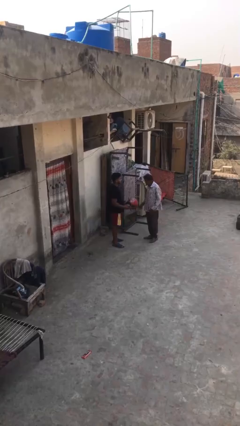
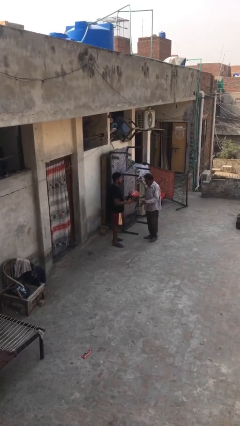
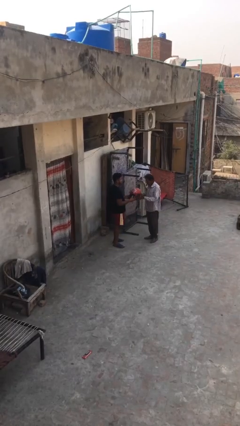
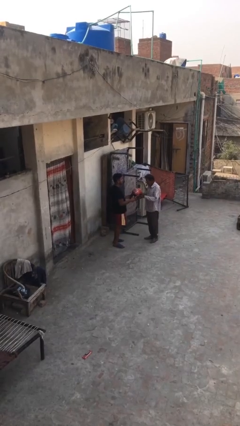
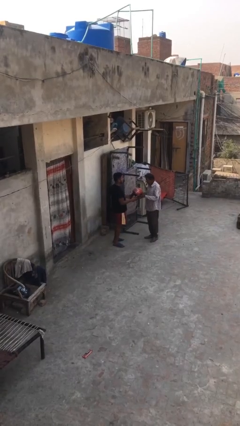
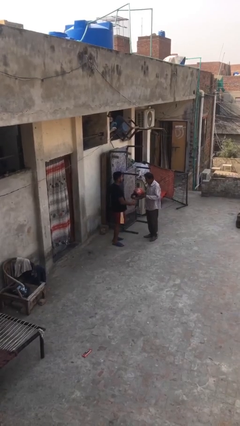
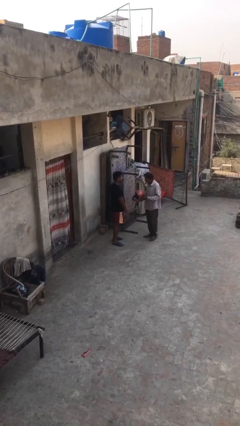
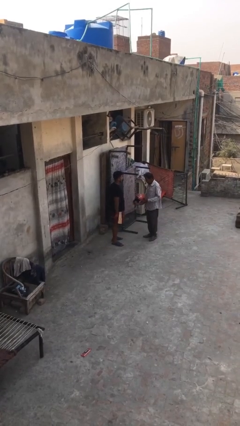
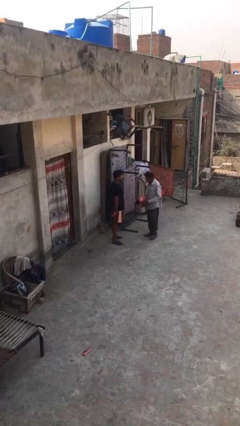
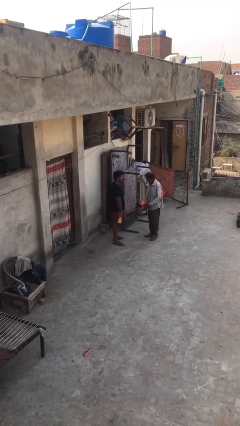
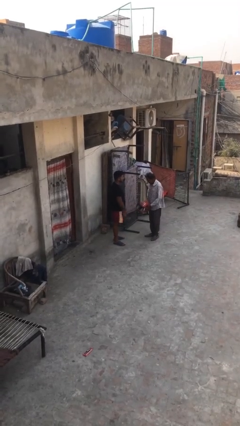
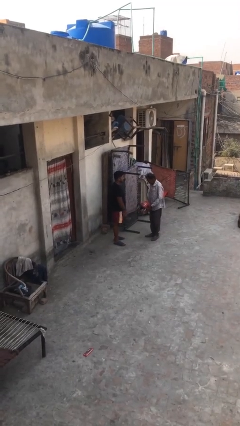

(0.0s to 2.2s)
person transfers object to person

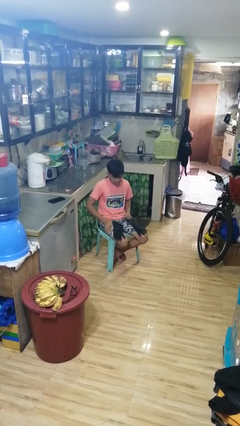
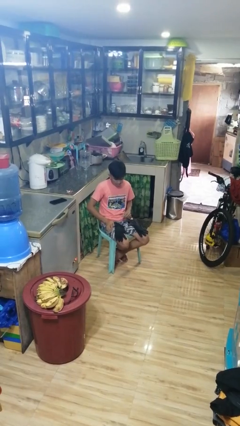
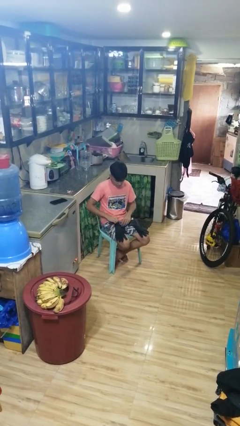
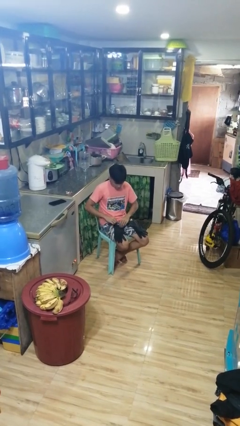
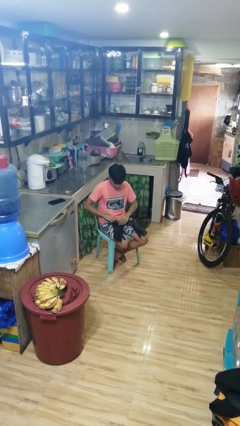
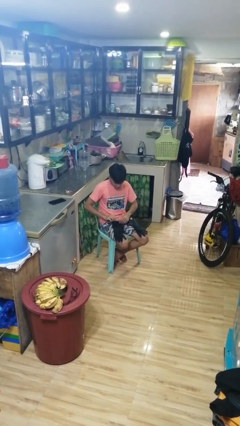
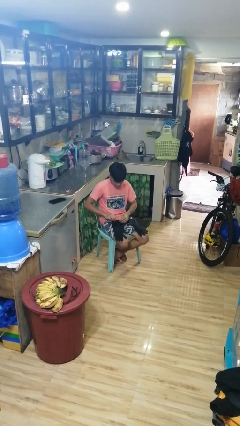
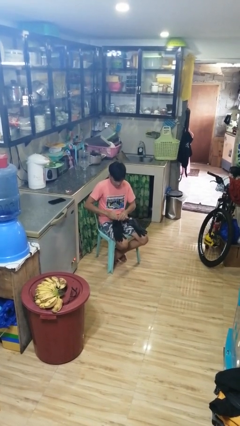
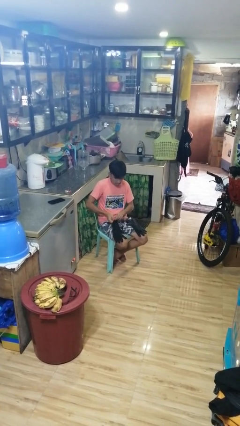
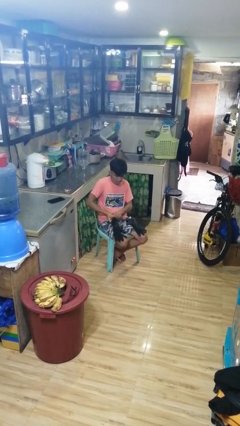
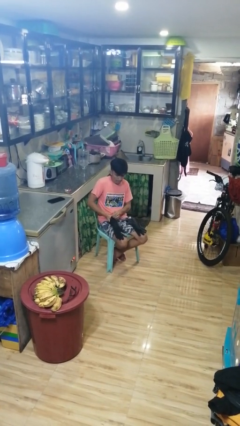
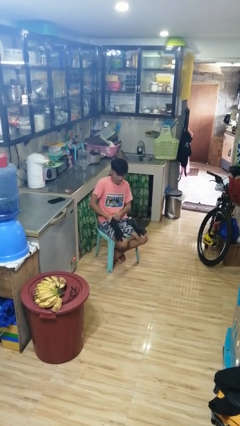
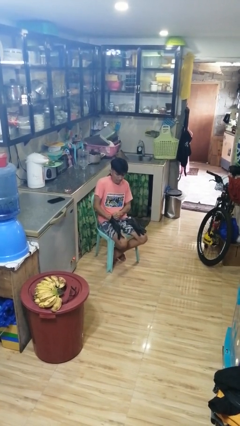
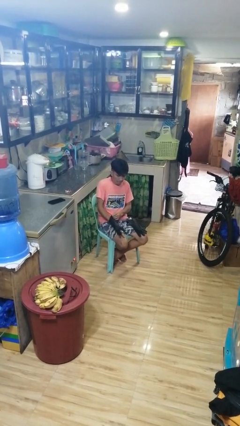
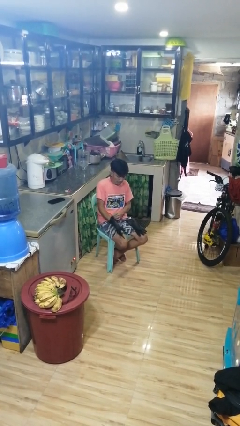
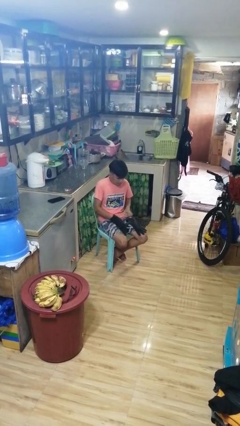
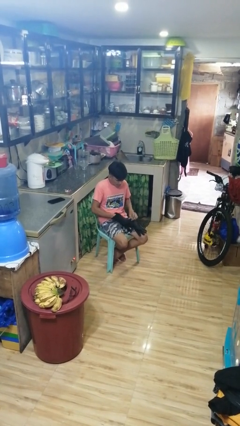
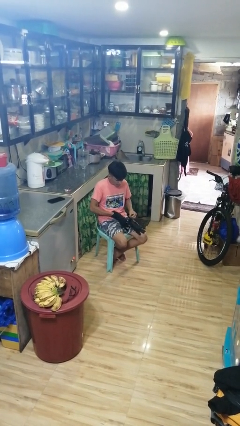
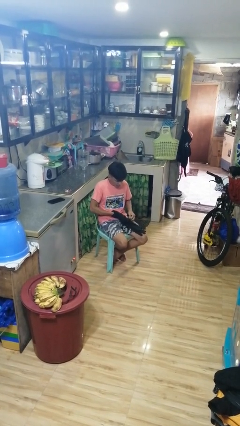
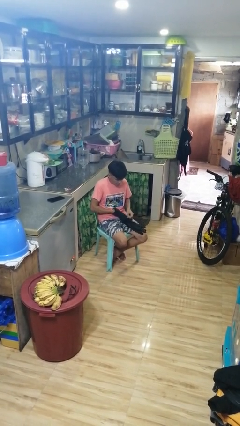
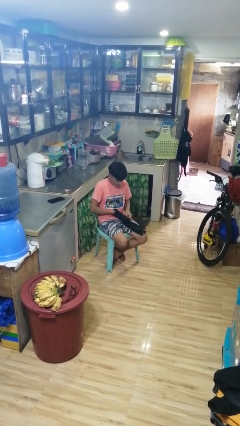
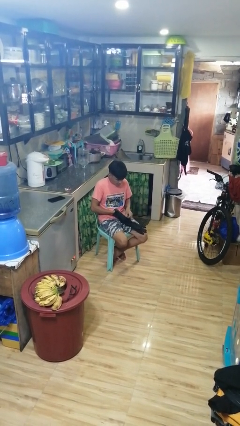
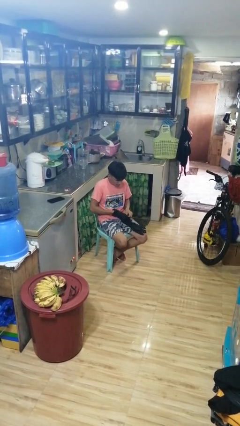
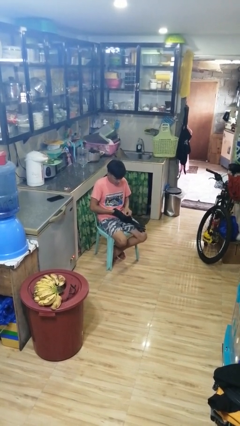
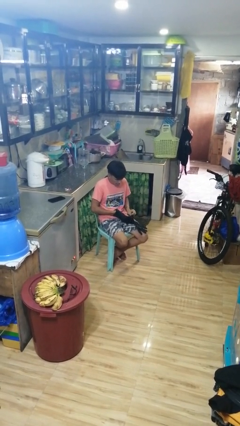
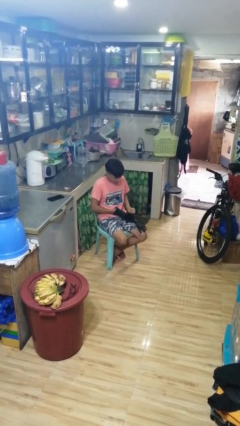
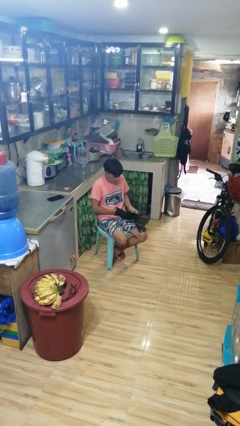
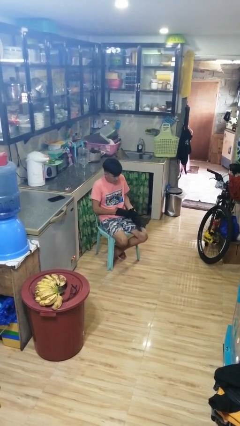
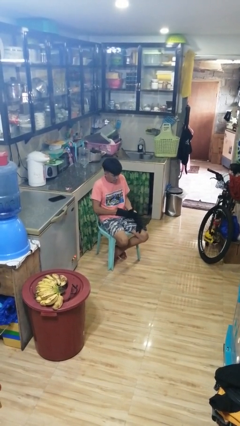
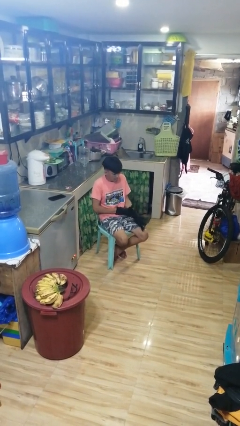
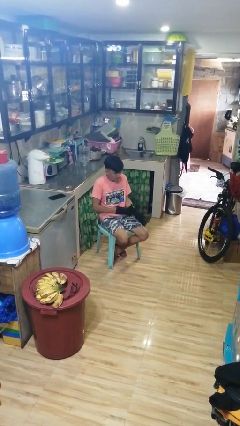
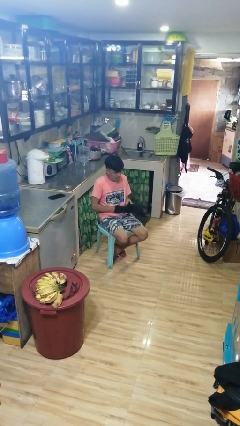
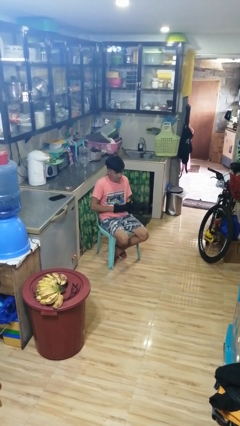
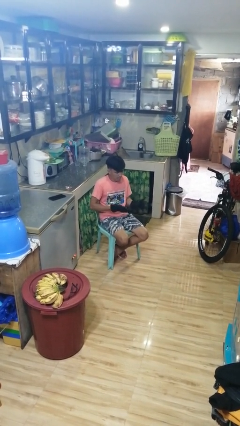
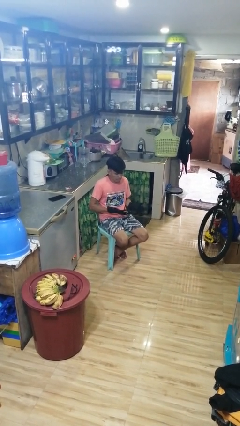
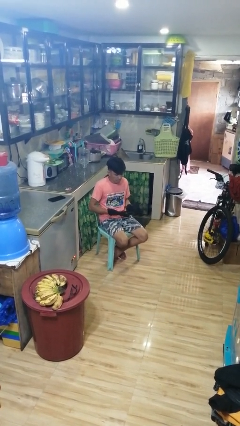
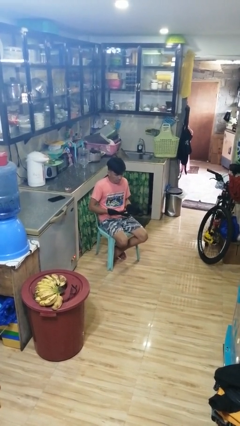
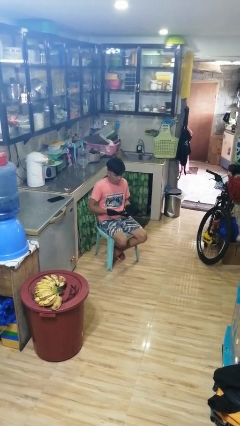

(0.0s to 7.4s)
person puts on gloves

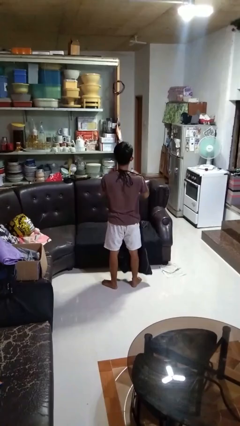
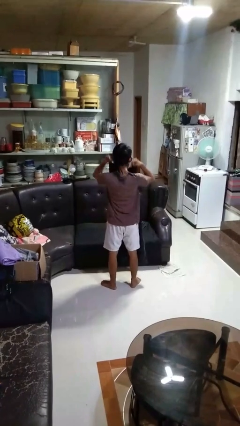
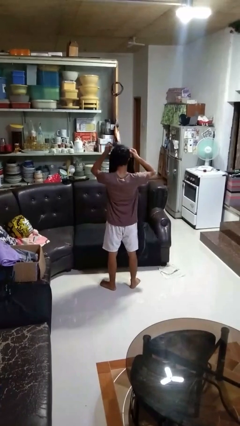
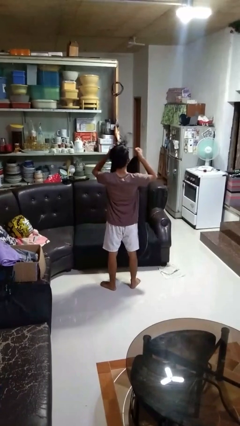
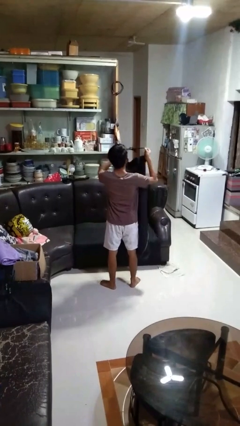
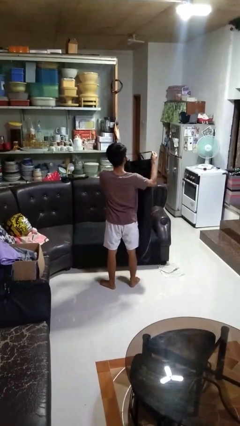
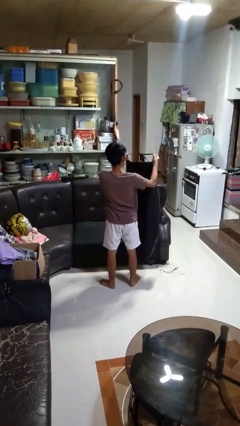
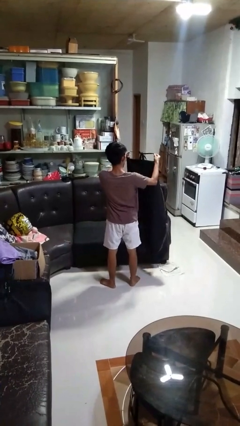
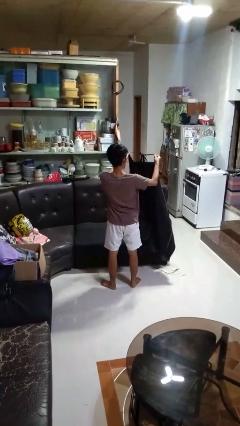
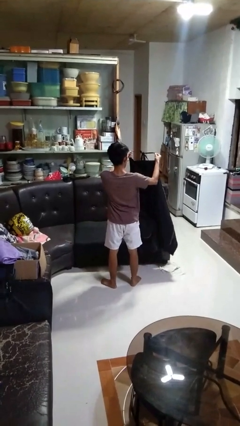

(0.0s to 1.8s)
person takes off apron

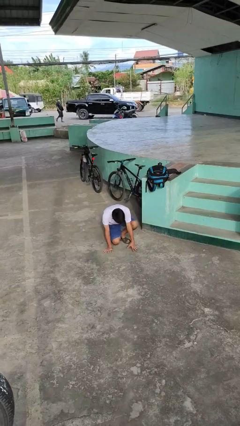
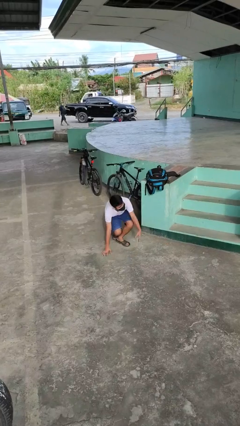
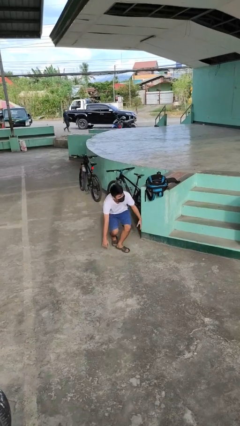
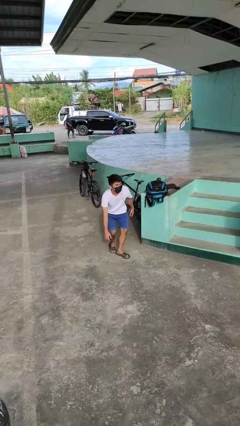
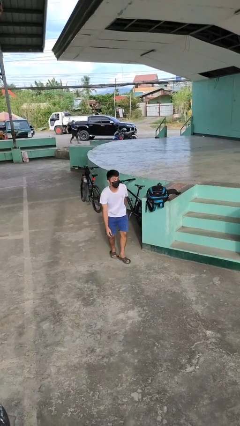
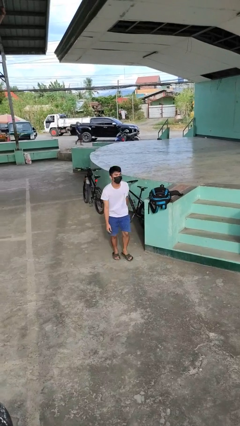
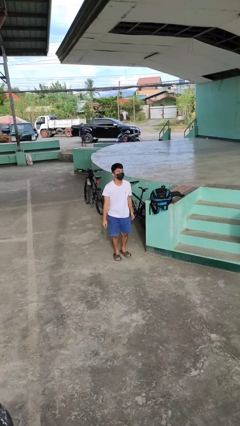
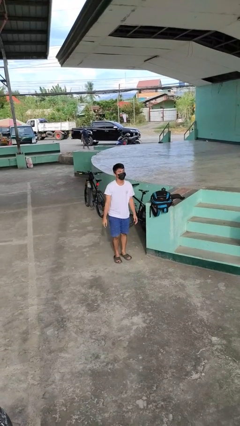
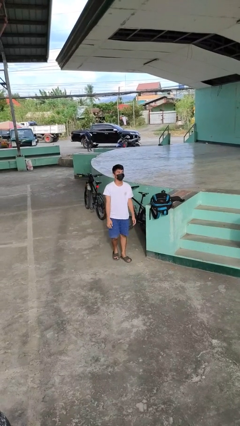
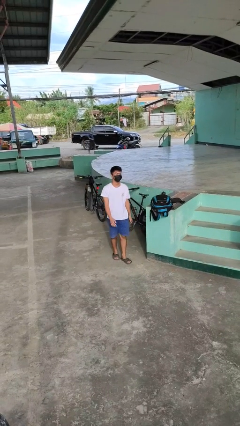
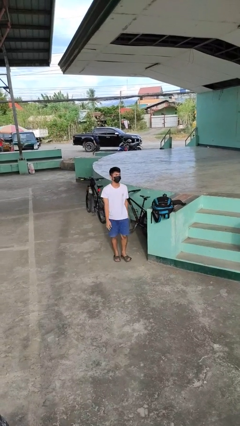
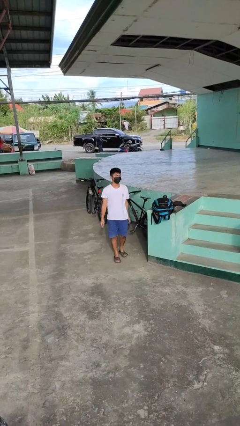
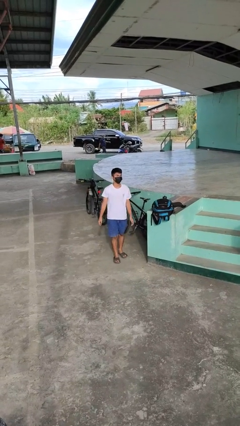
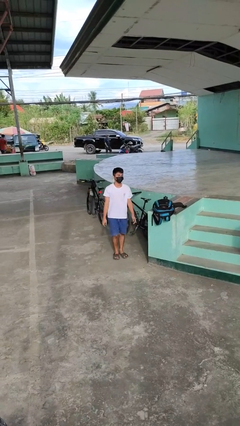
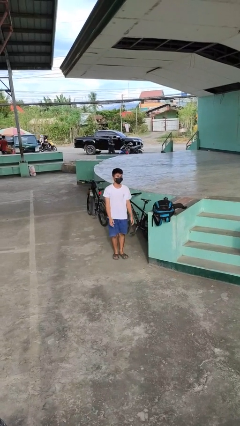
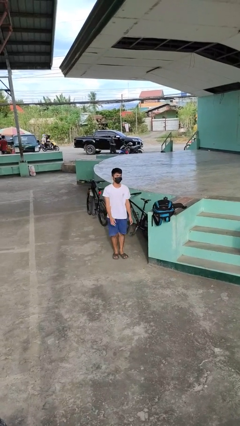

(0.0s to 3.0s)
person stands up from floor

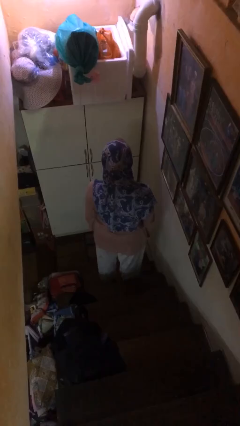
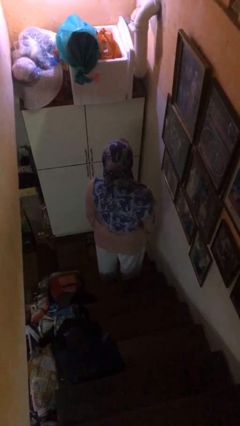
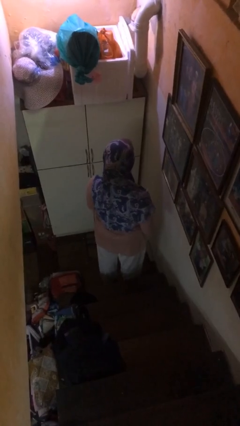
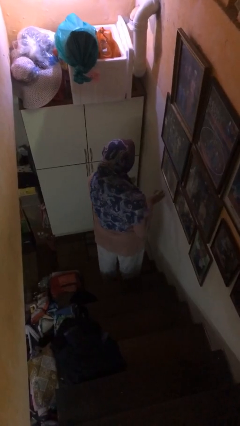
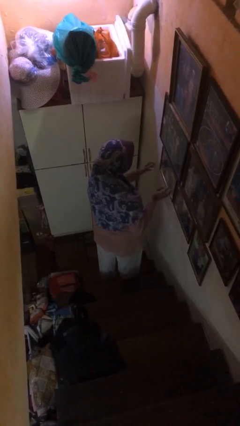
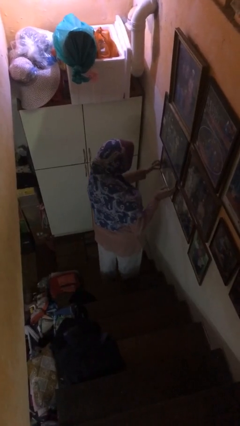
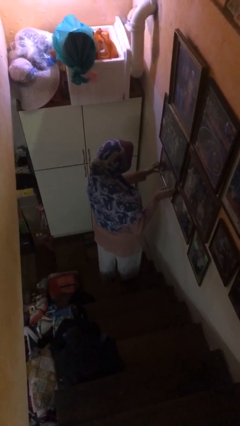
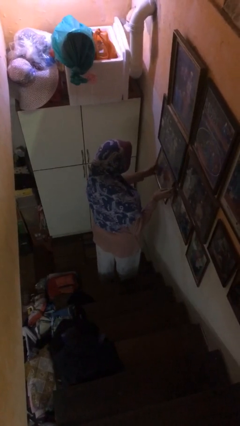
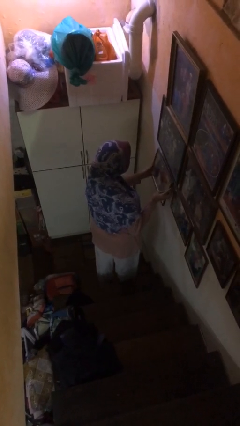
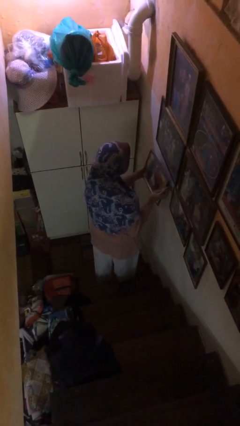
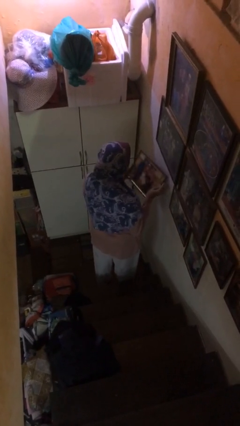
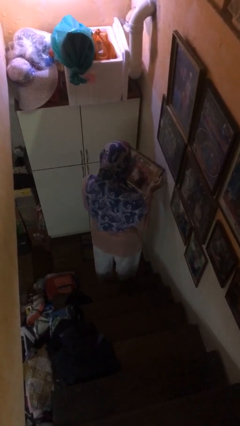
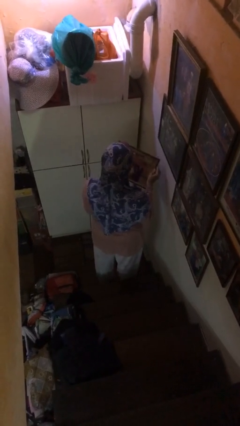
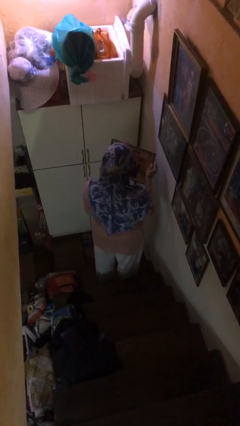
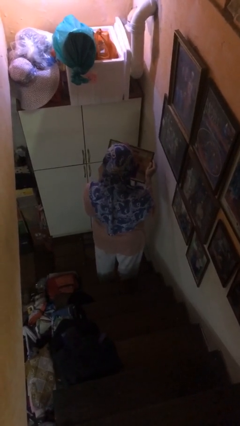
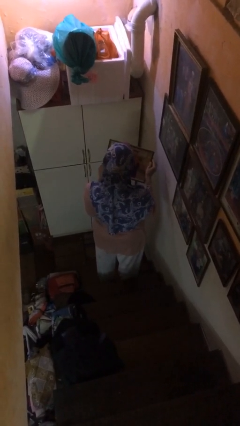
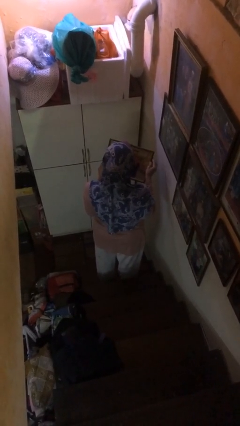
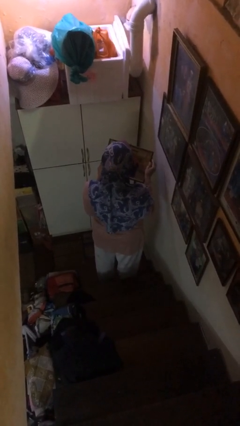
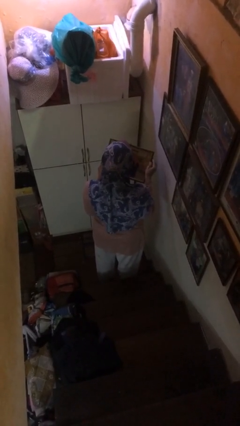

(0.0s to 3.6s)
person puts up picture frame
